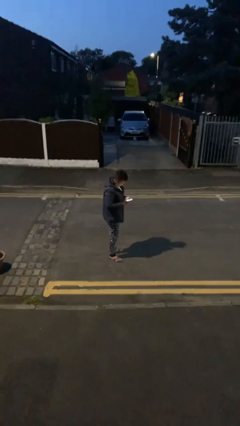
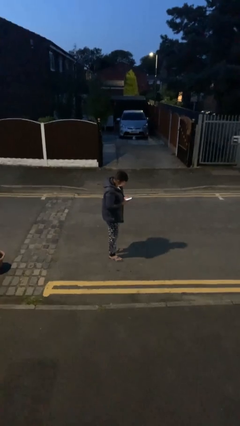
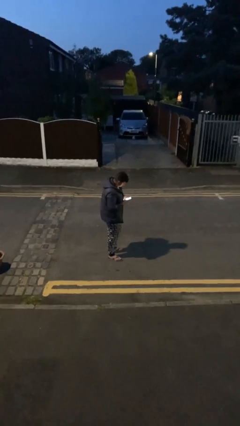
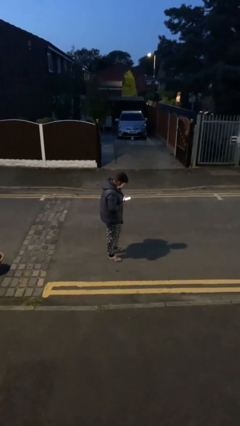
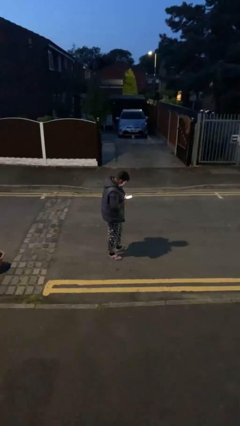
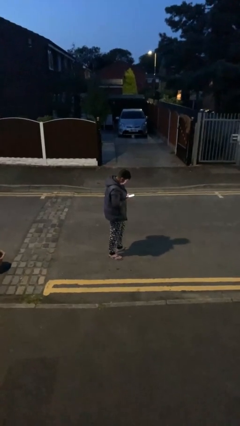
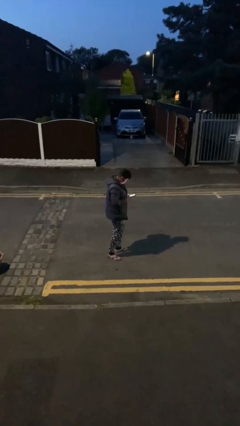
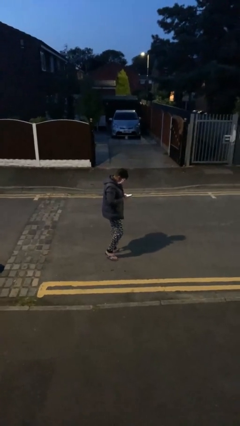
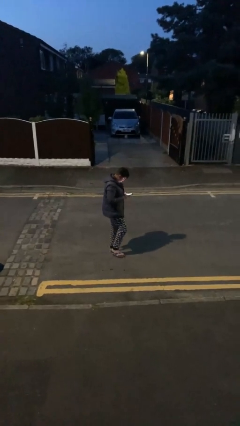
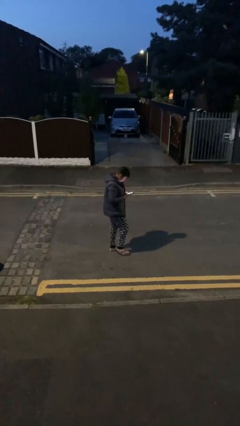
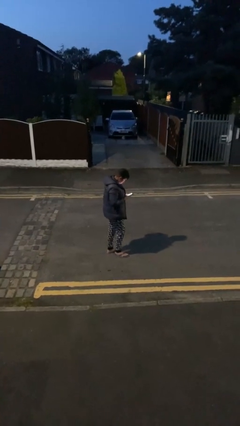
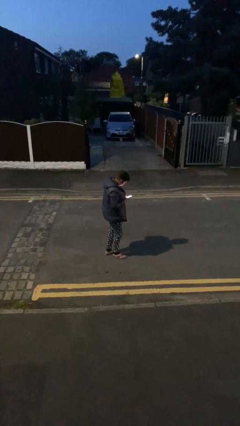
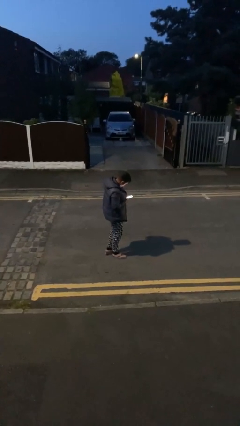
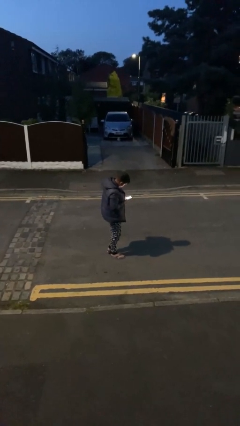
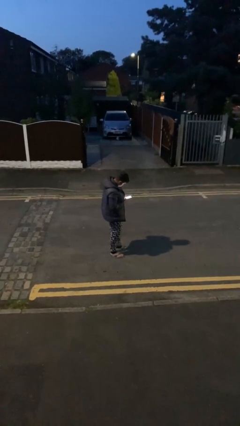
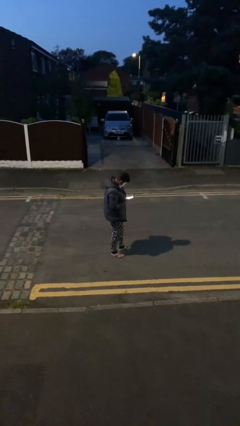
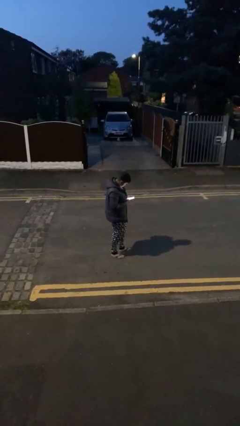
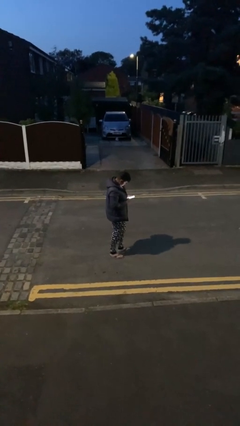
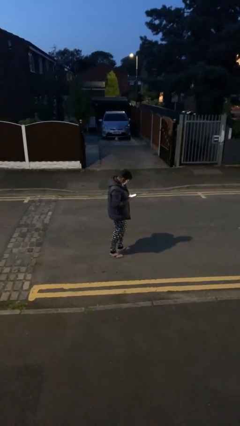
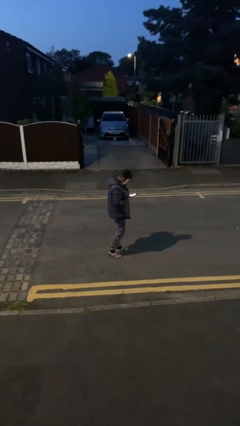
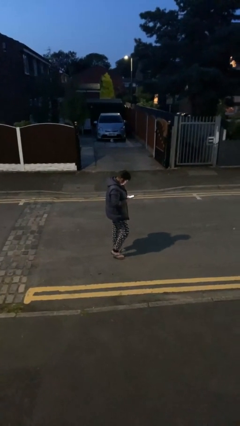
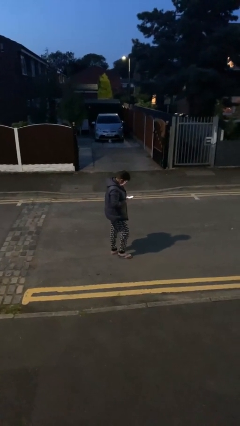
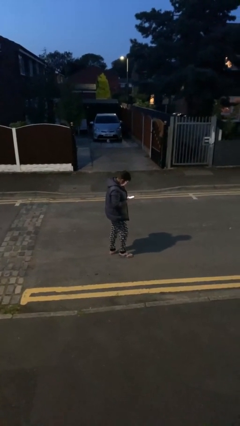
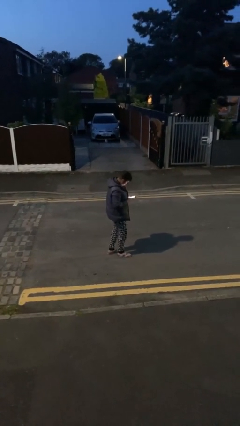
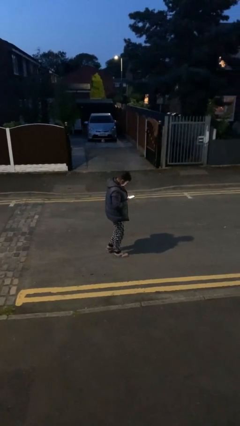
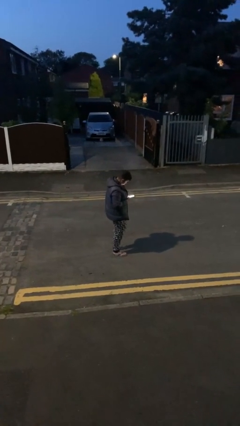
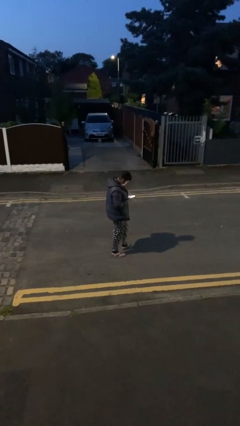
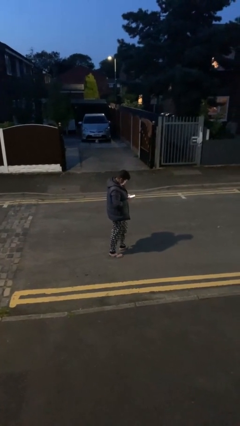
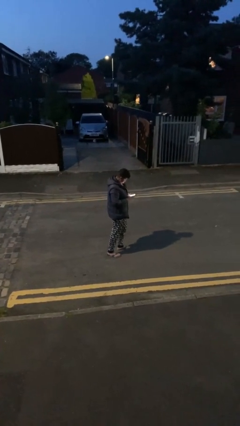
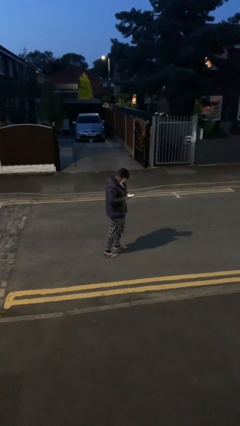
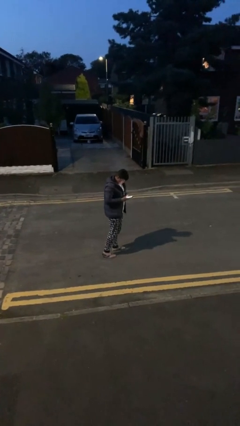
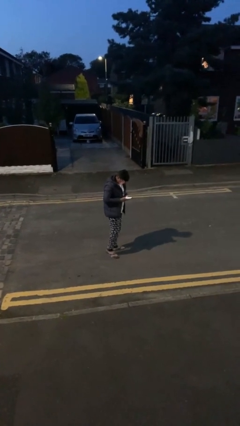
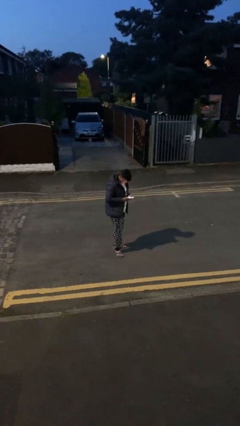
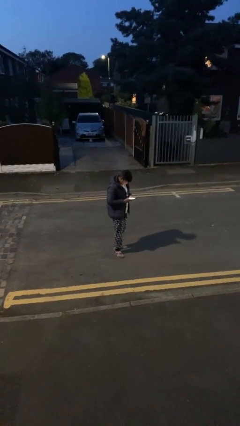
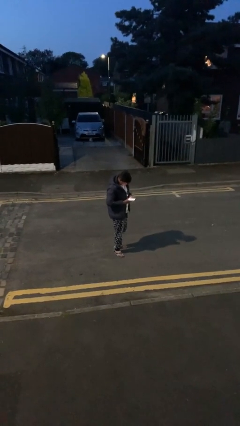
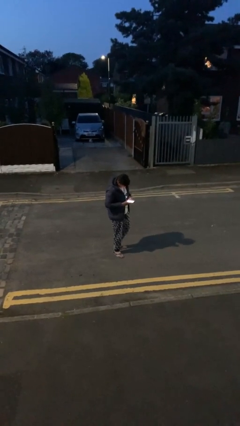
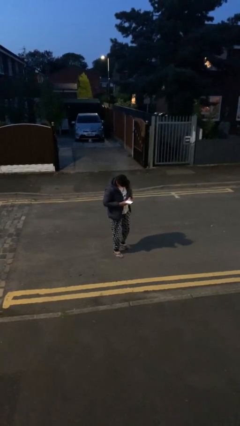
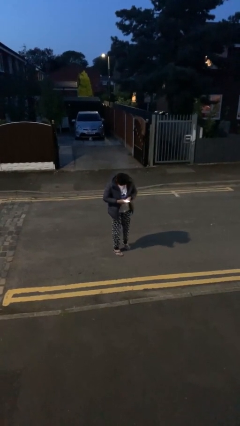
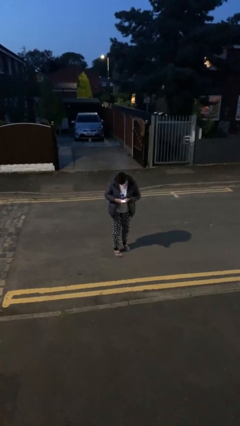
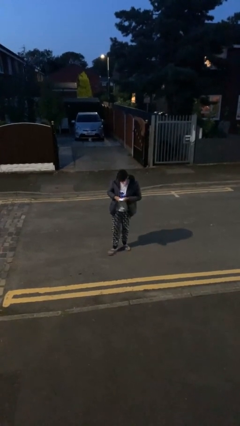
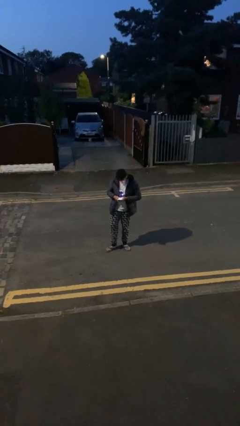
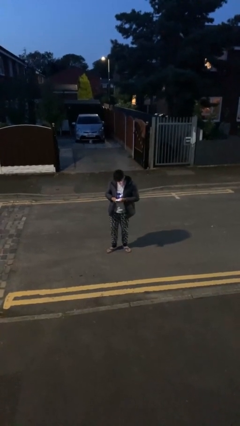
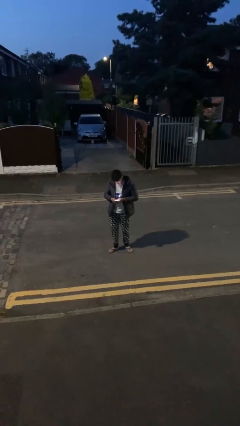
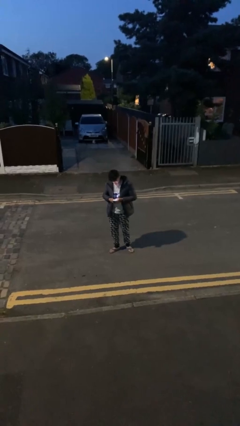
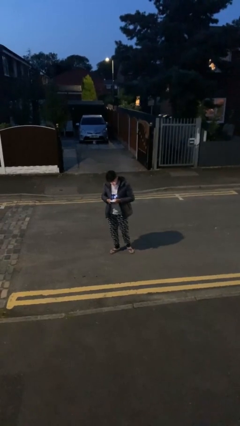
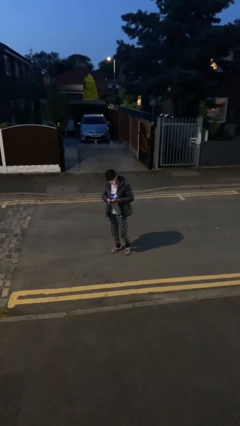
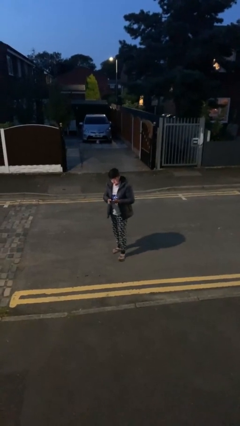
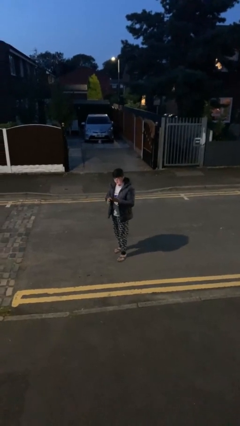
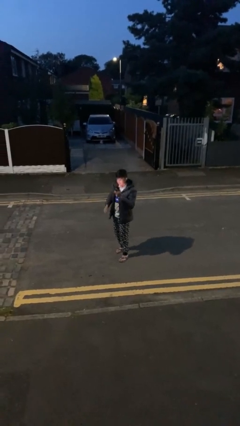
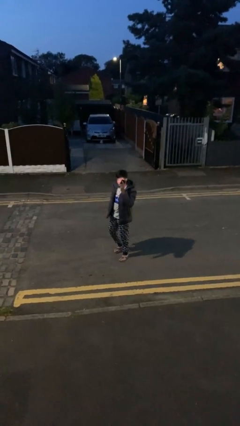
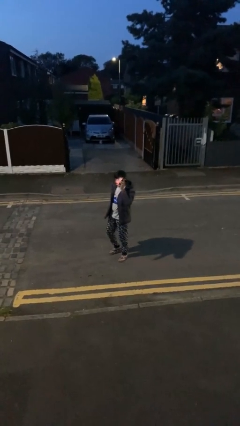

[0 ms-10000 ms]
person texts on phone

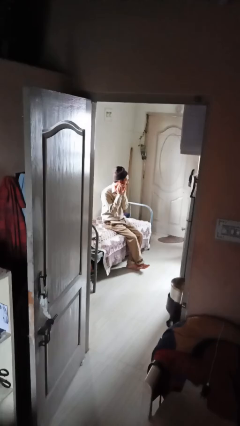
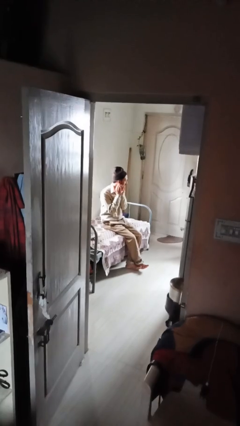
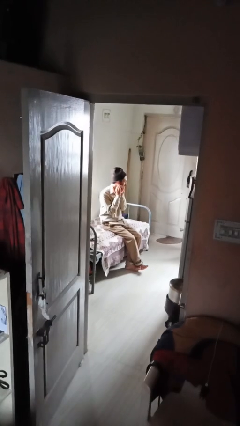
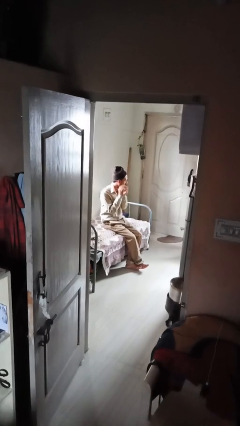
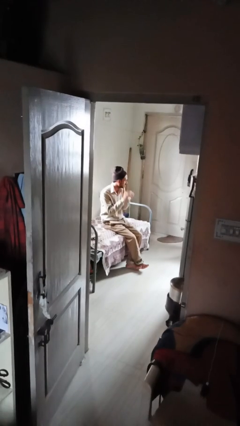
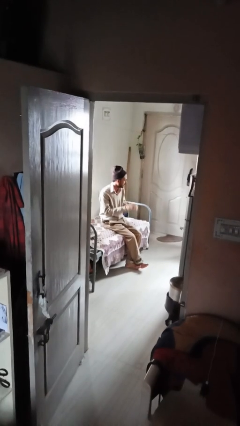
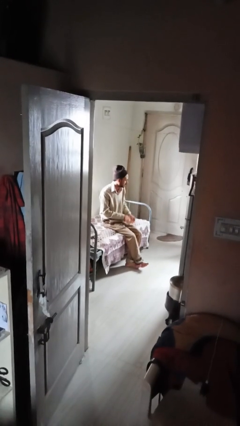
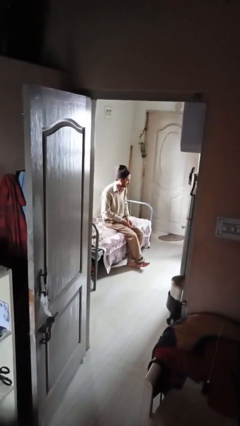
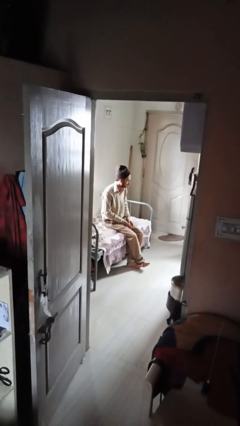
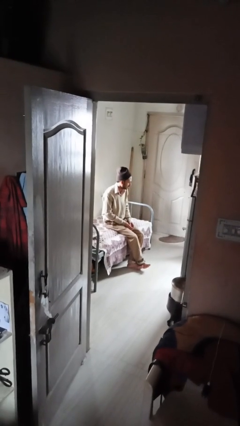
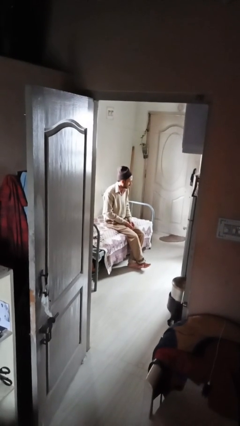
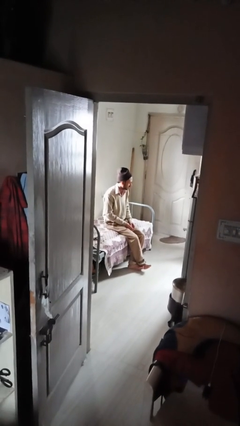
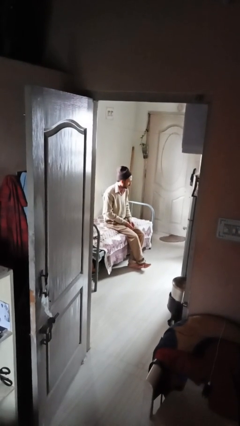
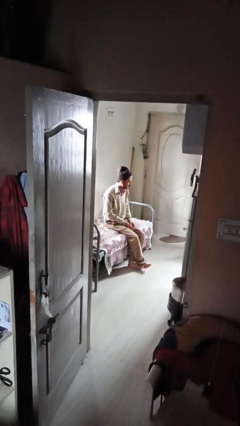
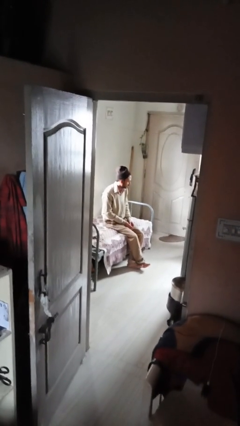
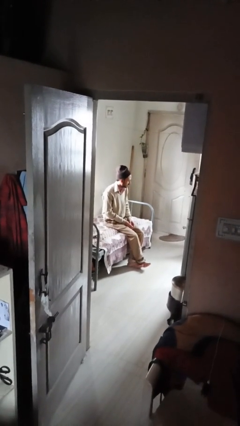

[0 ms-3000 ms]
person takes off earrings

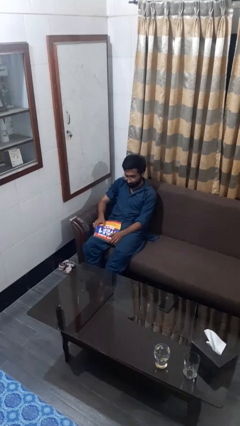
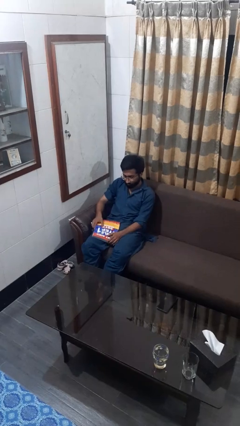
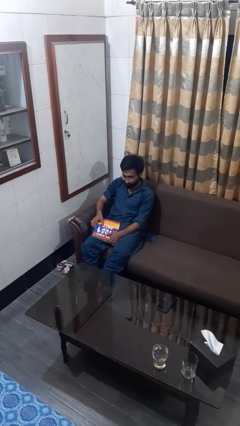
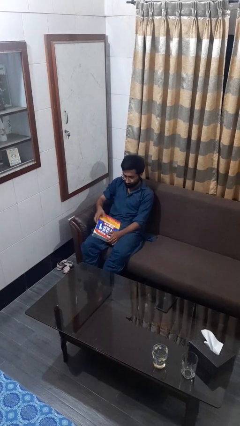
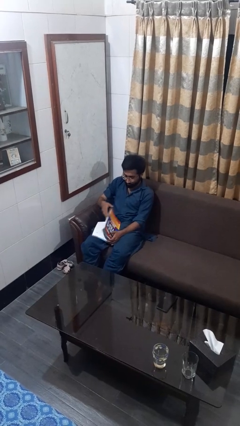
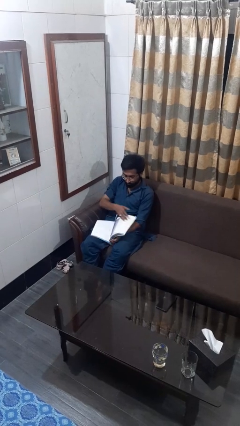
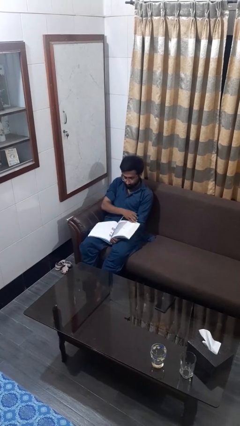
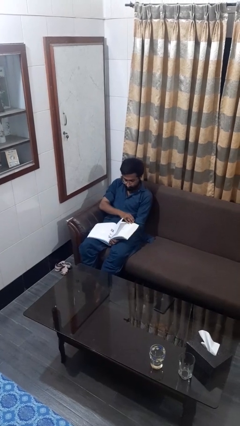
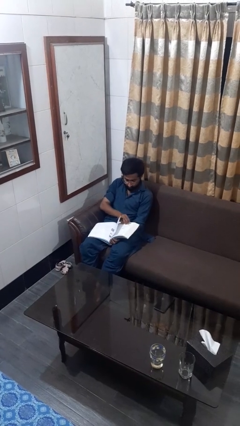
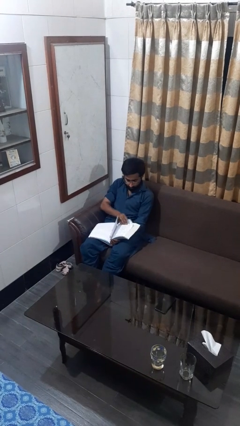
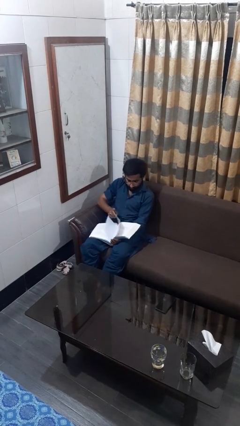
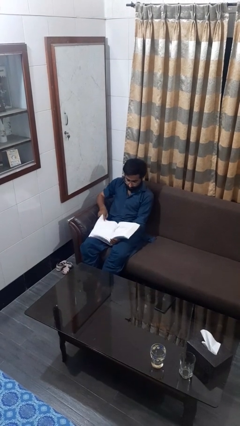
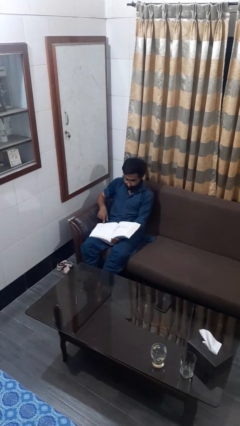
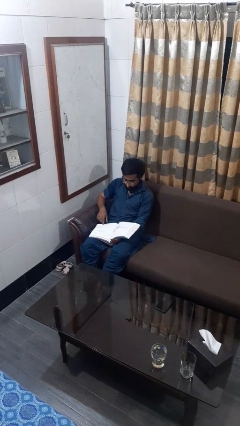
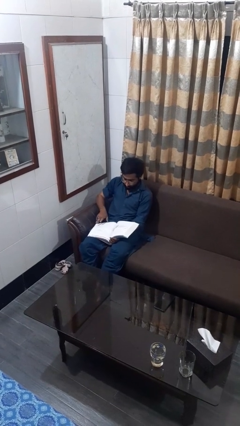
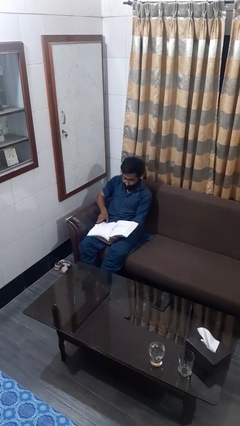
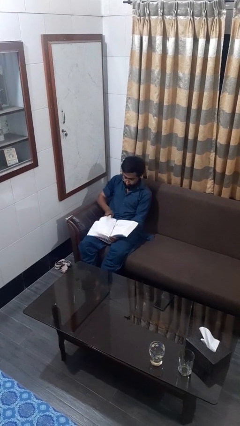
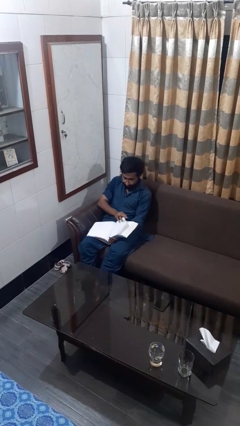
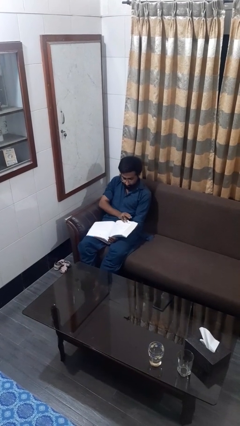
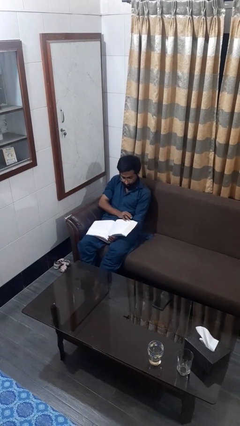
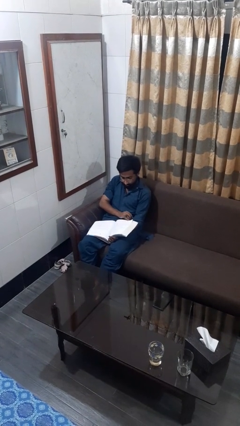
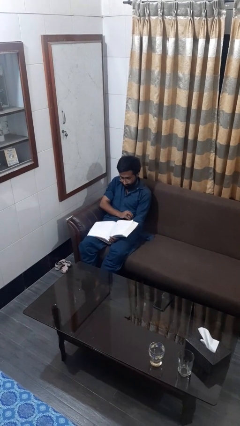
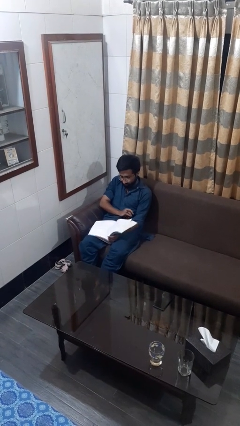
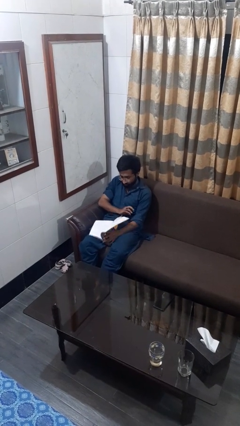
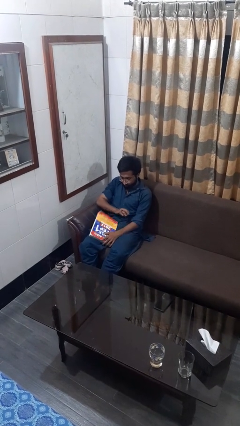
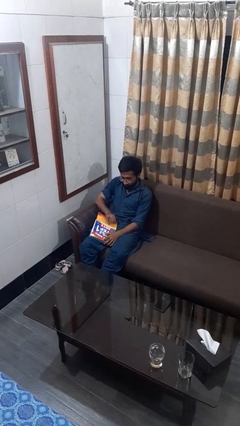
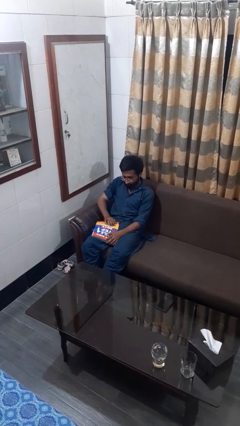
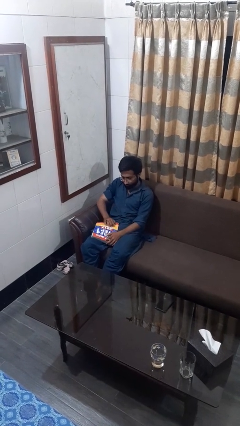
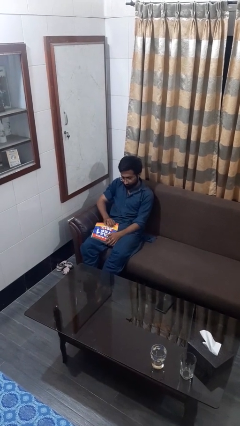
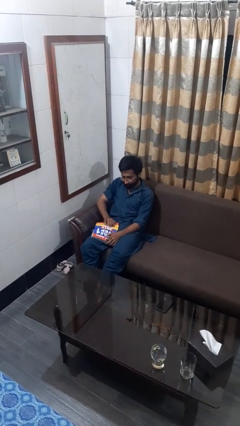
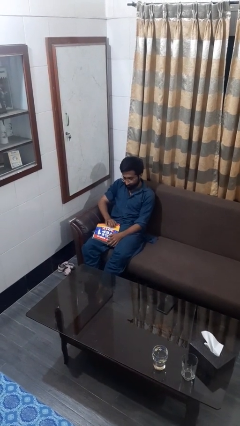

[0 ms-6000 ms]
person reads book
